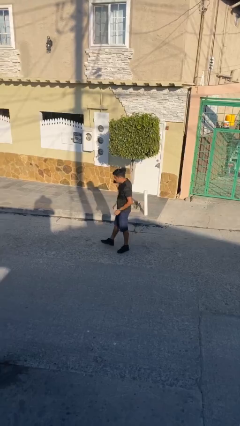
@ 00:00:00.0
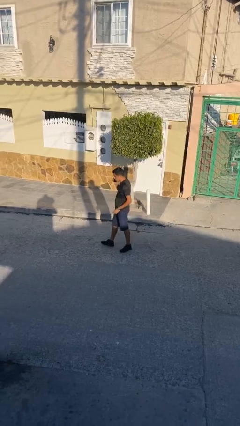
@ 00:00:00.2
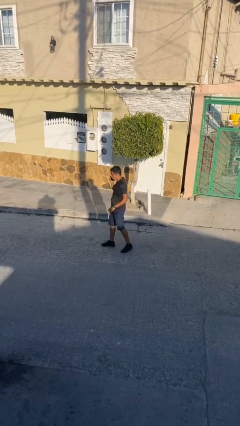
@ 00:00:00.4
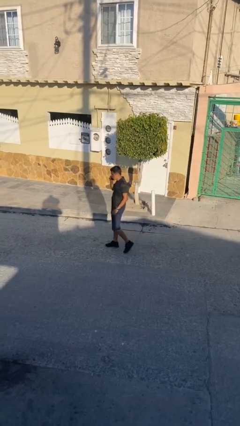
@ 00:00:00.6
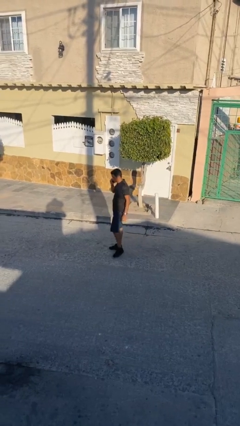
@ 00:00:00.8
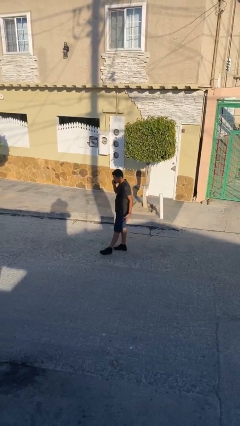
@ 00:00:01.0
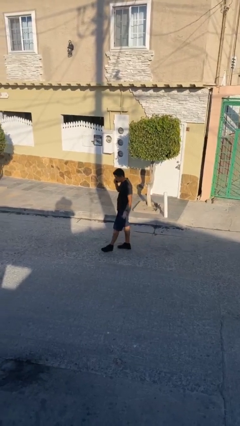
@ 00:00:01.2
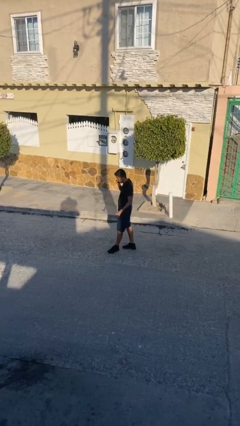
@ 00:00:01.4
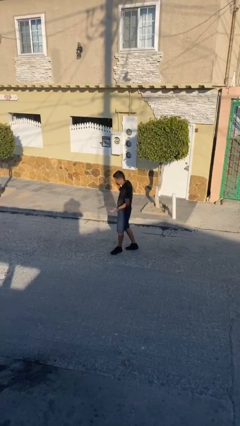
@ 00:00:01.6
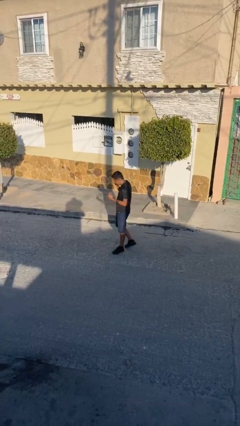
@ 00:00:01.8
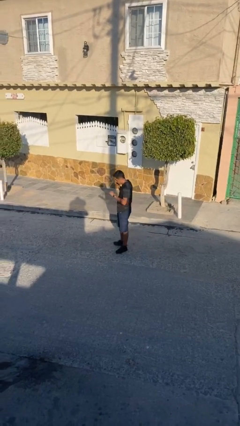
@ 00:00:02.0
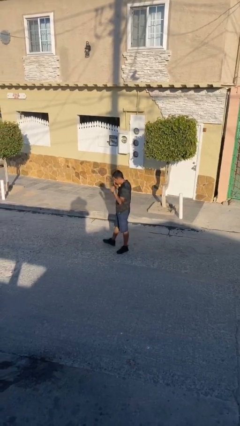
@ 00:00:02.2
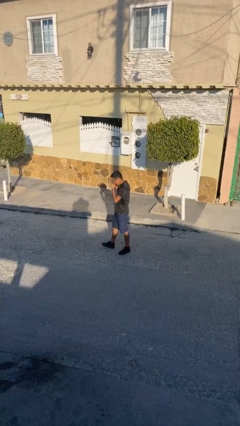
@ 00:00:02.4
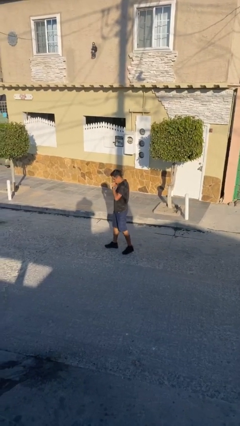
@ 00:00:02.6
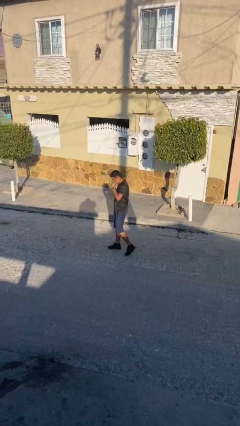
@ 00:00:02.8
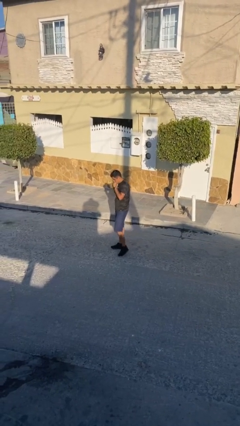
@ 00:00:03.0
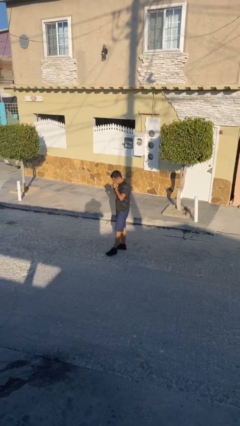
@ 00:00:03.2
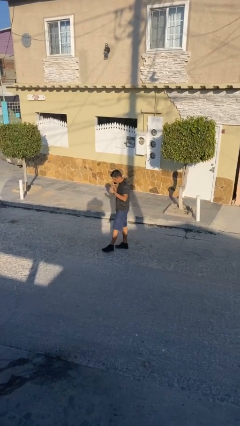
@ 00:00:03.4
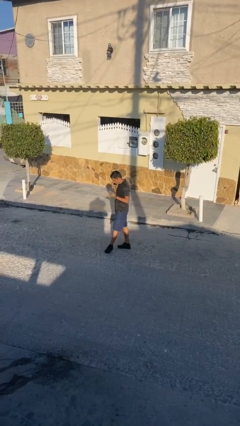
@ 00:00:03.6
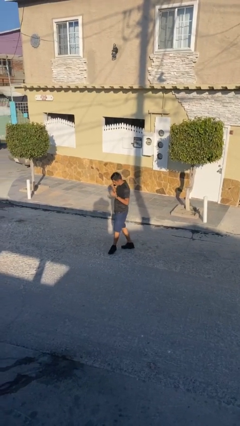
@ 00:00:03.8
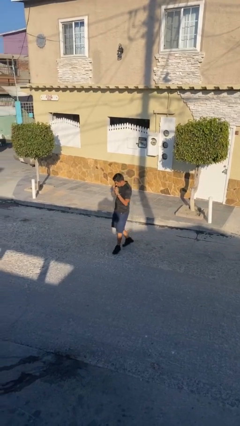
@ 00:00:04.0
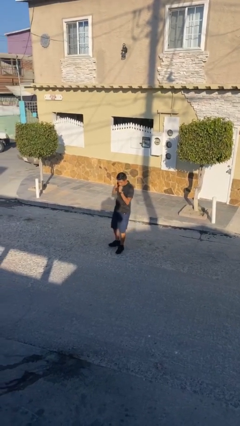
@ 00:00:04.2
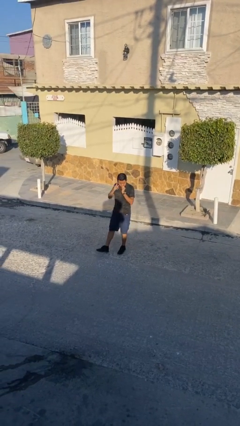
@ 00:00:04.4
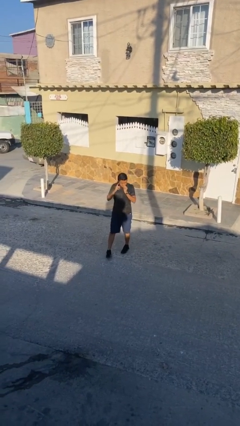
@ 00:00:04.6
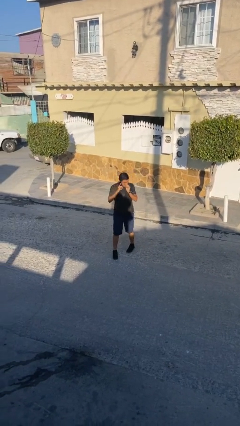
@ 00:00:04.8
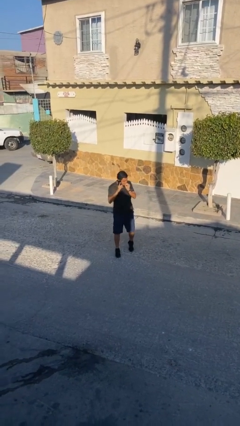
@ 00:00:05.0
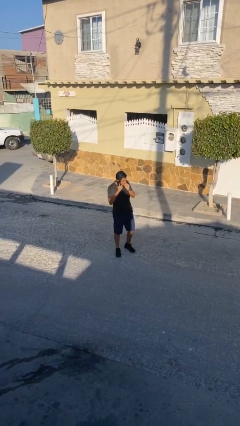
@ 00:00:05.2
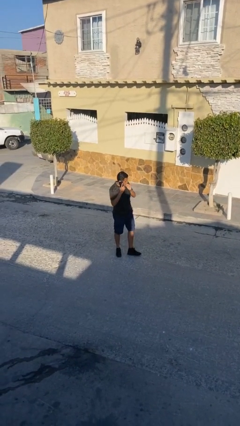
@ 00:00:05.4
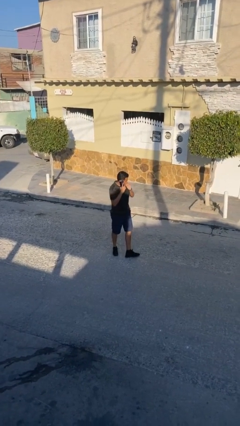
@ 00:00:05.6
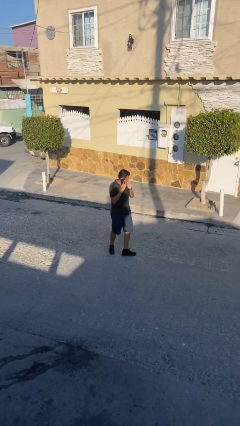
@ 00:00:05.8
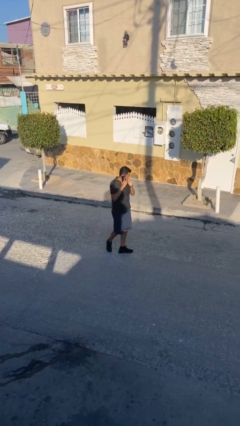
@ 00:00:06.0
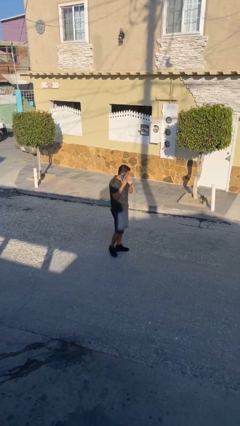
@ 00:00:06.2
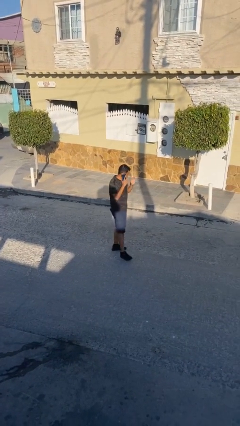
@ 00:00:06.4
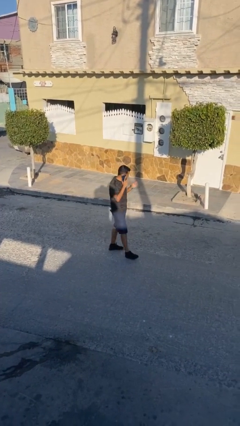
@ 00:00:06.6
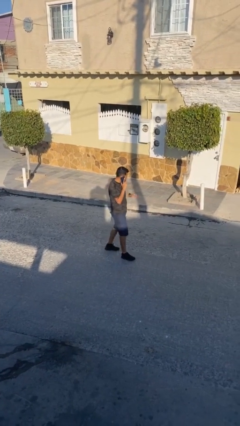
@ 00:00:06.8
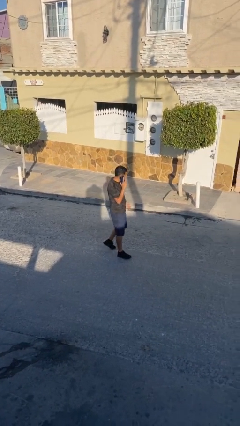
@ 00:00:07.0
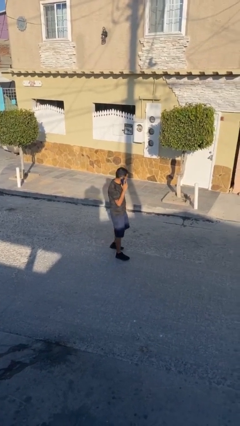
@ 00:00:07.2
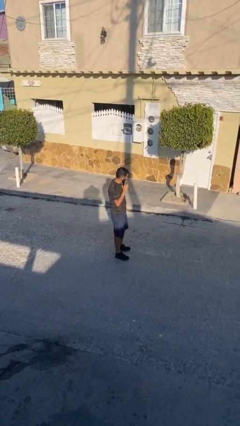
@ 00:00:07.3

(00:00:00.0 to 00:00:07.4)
person talks on phone

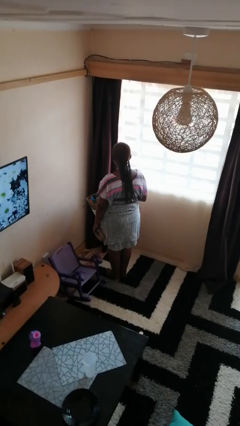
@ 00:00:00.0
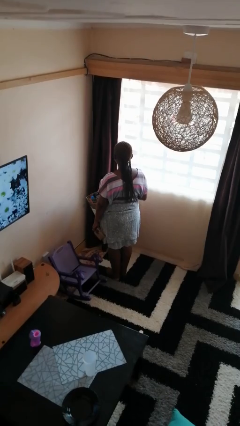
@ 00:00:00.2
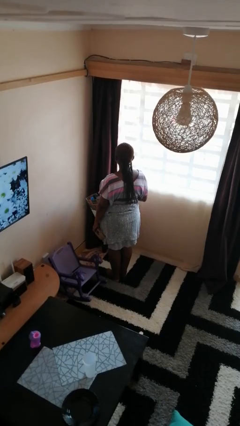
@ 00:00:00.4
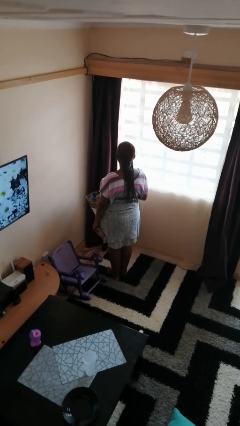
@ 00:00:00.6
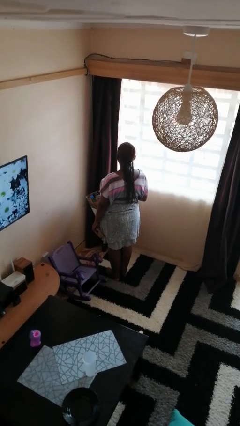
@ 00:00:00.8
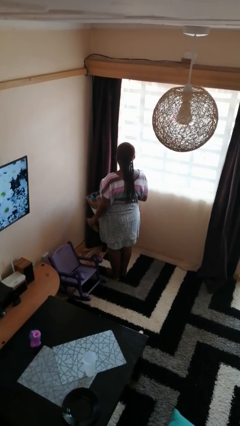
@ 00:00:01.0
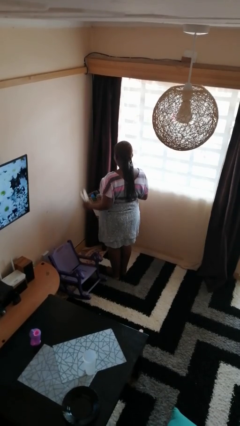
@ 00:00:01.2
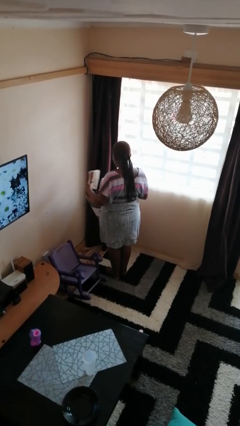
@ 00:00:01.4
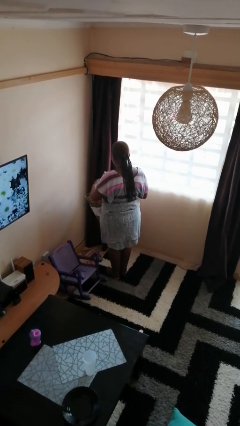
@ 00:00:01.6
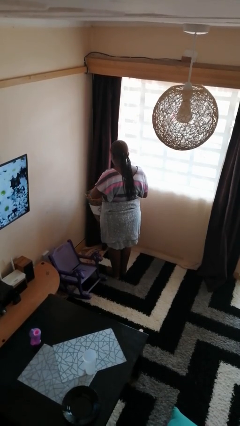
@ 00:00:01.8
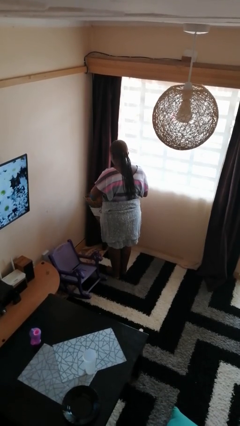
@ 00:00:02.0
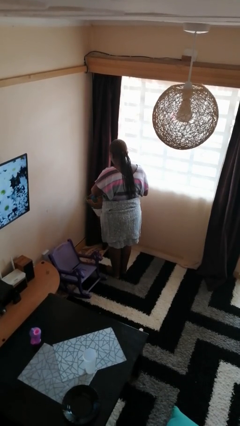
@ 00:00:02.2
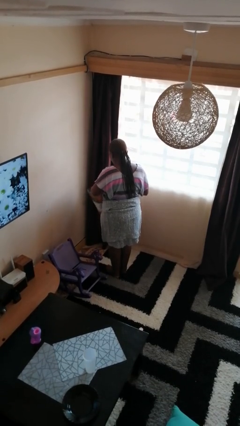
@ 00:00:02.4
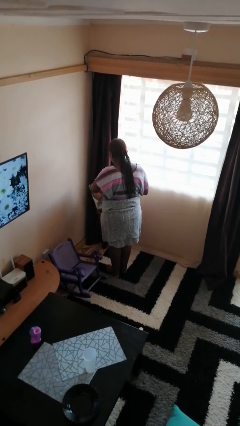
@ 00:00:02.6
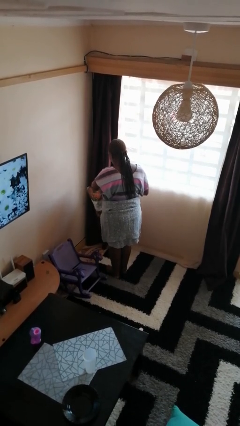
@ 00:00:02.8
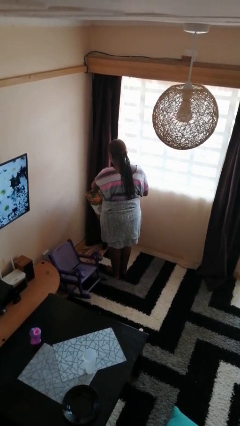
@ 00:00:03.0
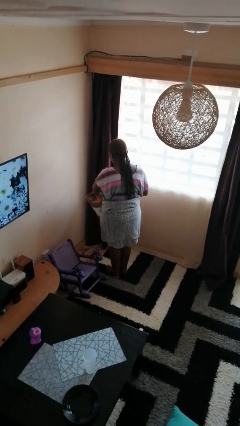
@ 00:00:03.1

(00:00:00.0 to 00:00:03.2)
person puts object into bag

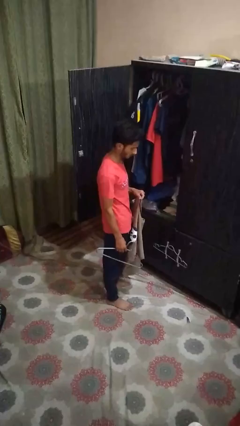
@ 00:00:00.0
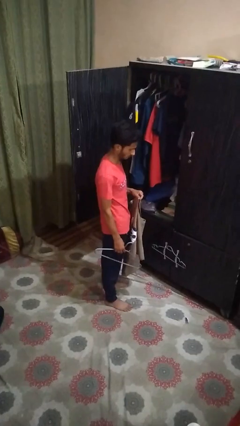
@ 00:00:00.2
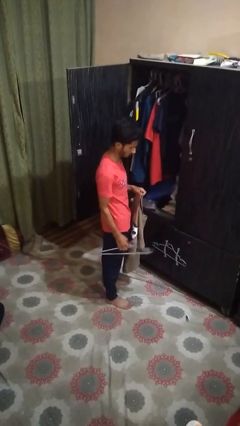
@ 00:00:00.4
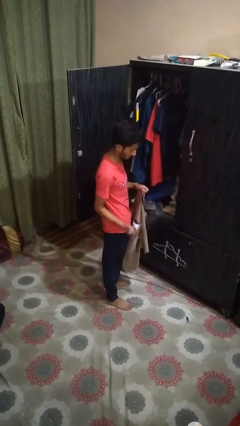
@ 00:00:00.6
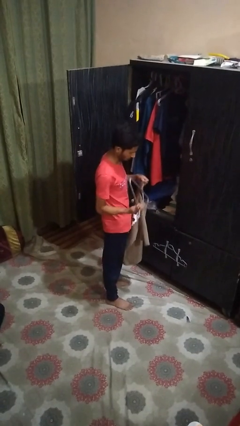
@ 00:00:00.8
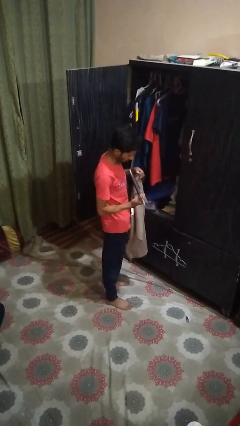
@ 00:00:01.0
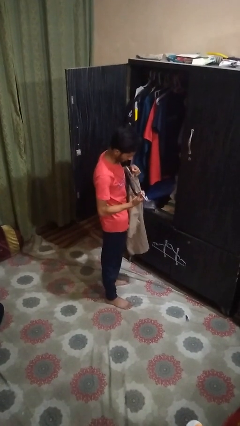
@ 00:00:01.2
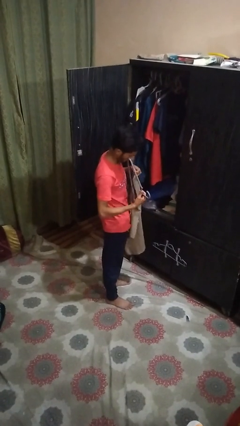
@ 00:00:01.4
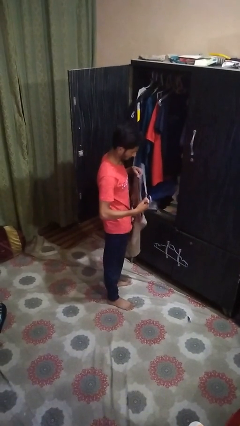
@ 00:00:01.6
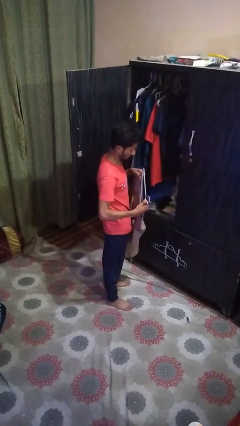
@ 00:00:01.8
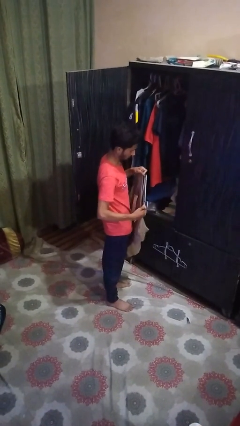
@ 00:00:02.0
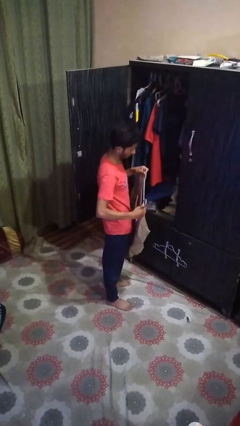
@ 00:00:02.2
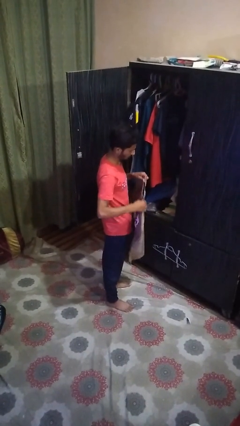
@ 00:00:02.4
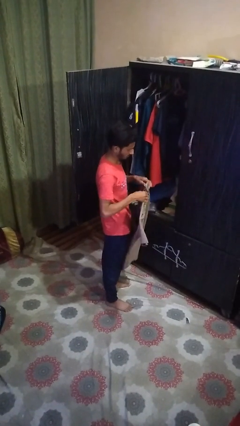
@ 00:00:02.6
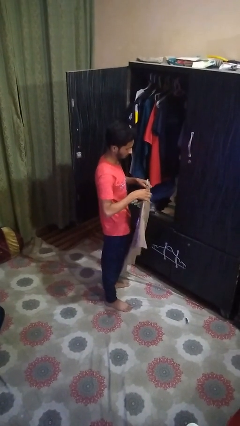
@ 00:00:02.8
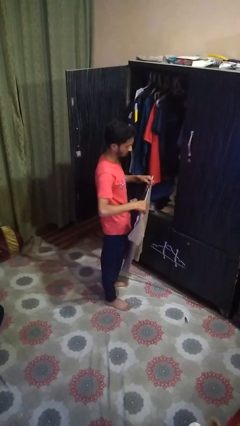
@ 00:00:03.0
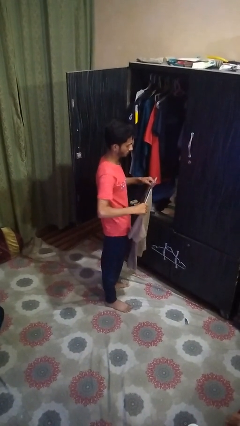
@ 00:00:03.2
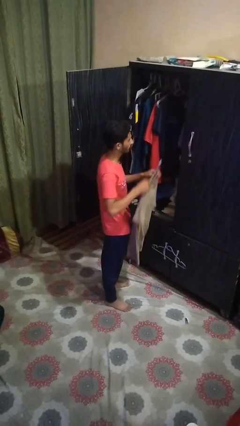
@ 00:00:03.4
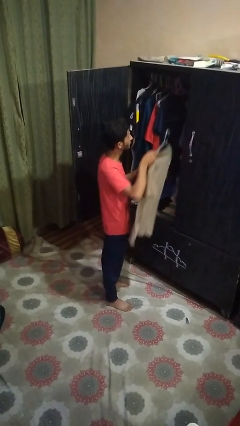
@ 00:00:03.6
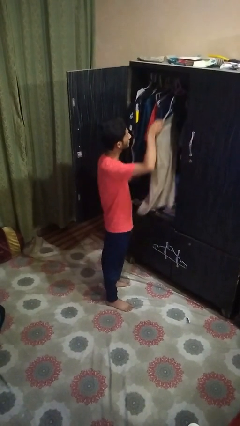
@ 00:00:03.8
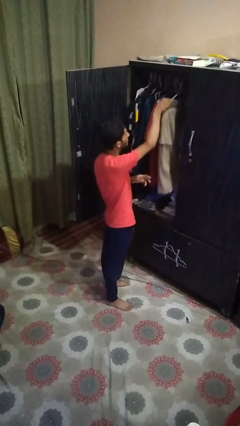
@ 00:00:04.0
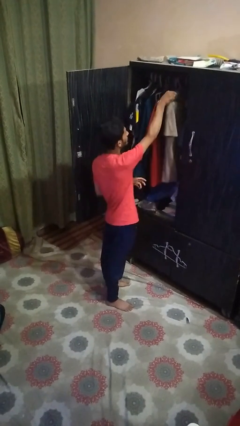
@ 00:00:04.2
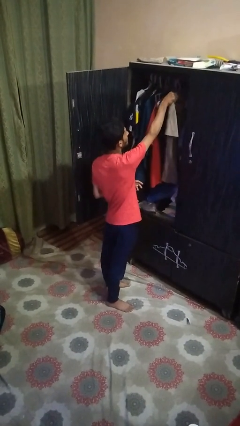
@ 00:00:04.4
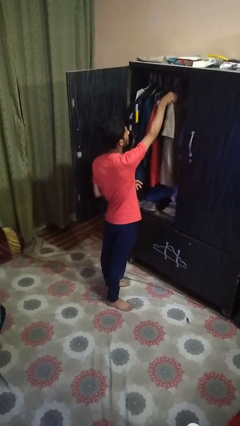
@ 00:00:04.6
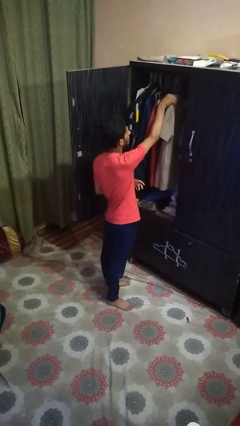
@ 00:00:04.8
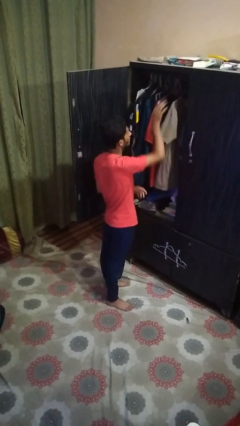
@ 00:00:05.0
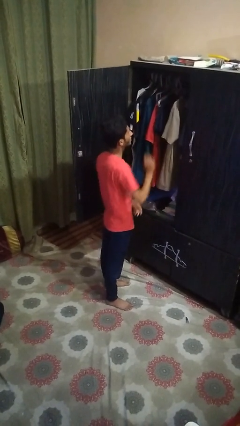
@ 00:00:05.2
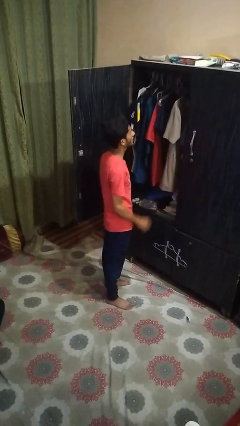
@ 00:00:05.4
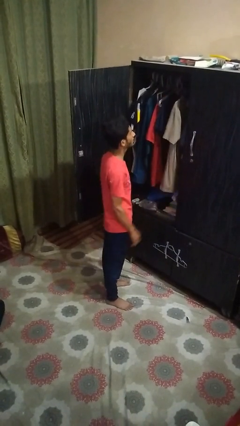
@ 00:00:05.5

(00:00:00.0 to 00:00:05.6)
person puts clothes into closet

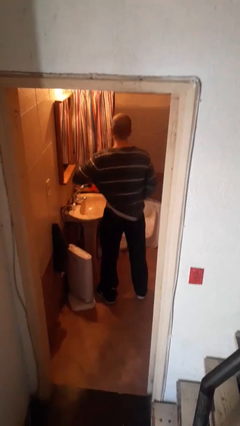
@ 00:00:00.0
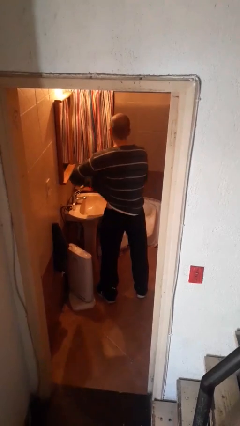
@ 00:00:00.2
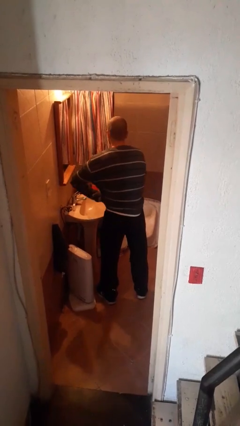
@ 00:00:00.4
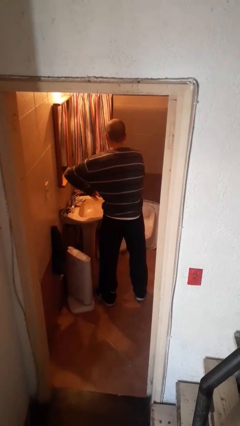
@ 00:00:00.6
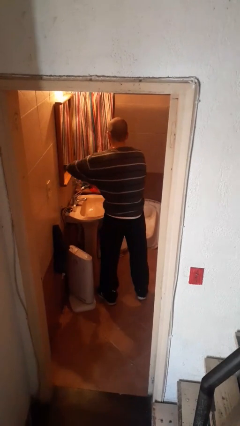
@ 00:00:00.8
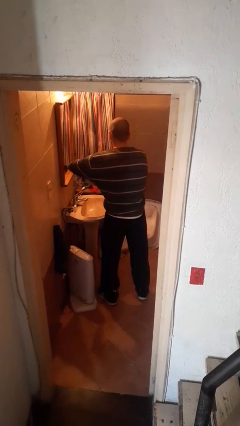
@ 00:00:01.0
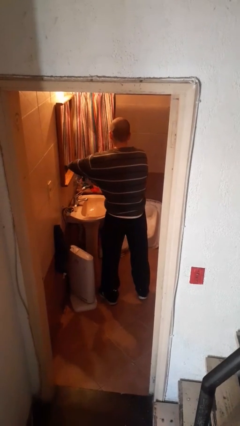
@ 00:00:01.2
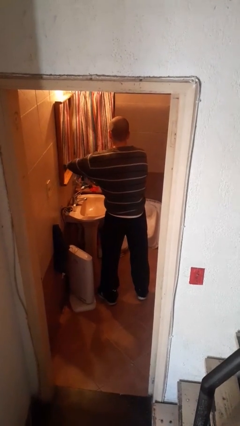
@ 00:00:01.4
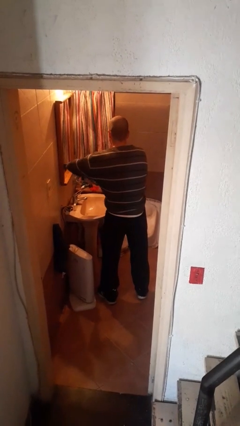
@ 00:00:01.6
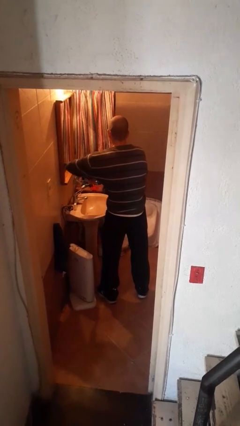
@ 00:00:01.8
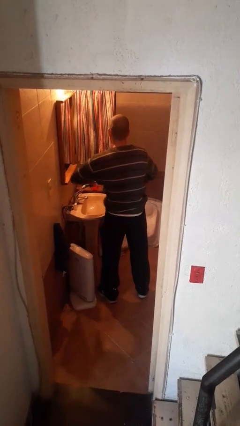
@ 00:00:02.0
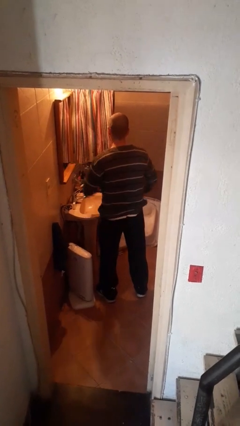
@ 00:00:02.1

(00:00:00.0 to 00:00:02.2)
person applies deodorant
